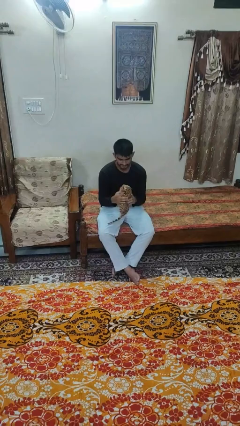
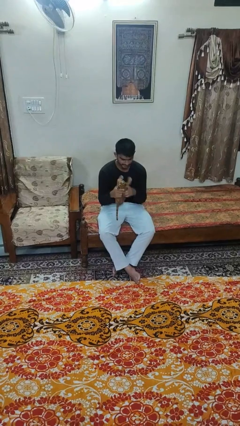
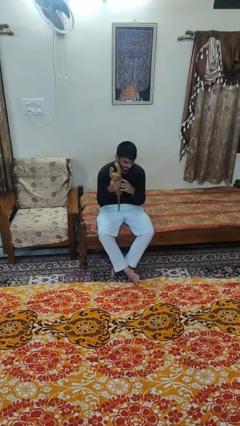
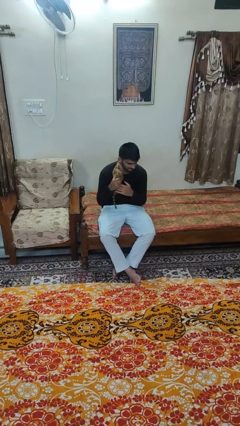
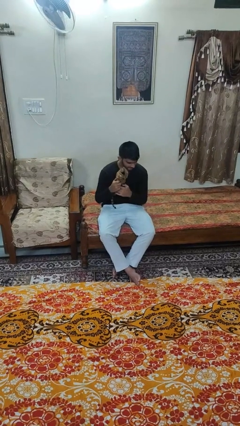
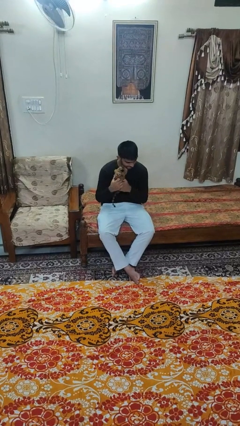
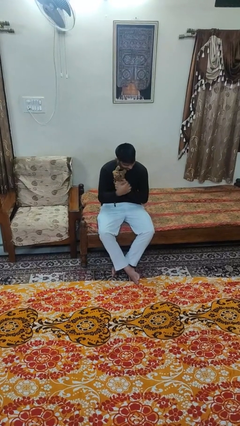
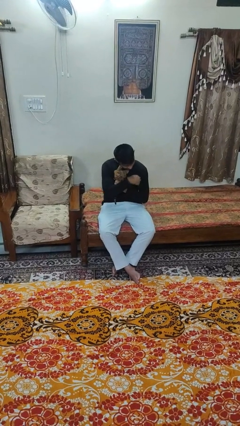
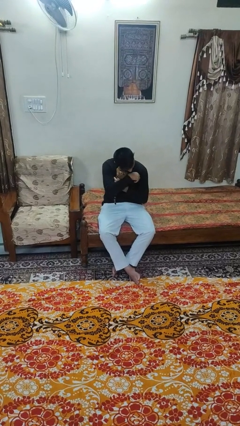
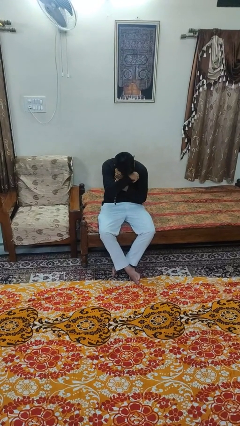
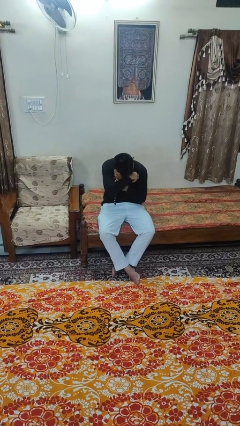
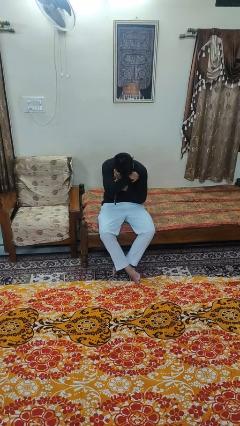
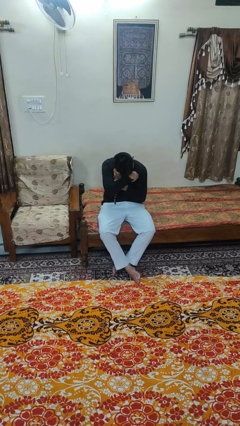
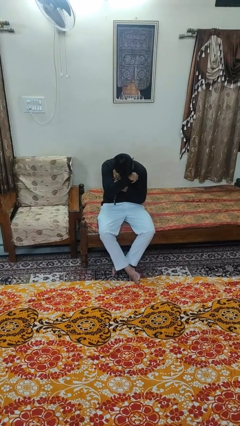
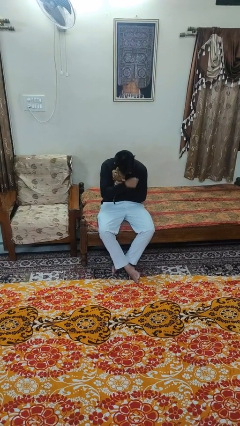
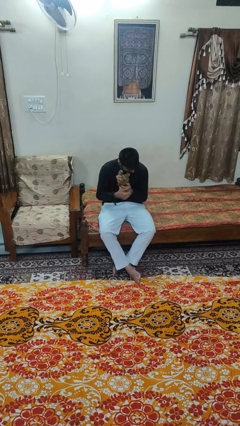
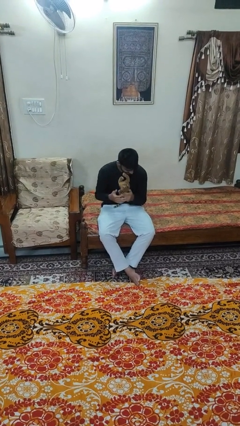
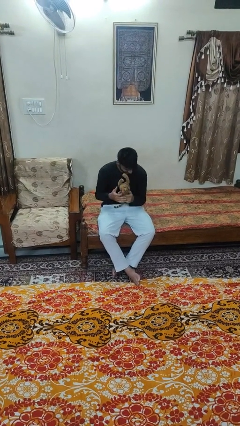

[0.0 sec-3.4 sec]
person hugs stuffed animal

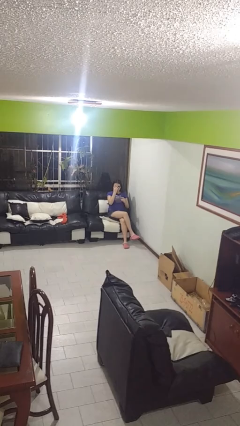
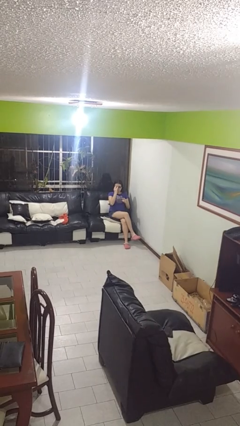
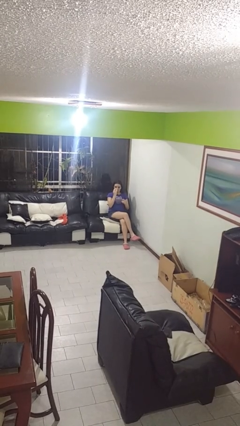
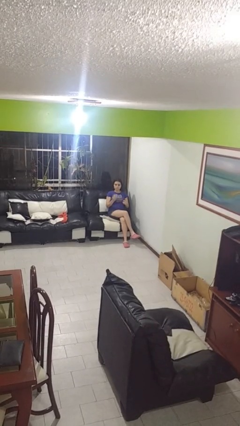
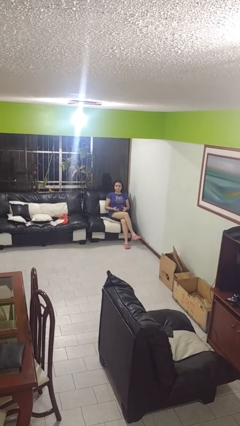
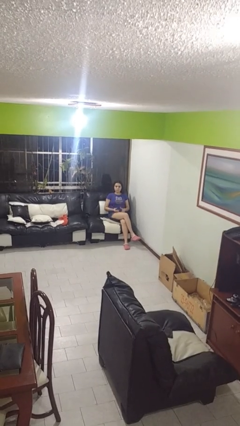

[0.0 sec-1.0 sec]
person takes off glasses

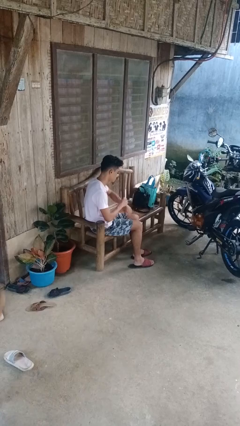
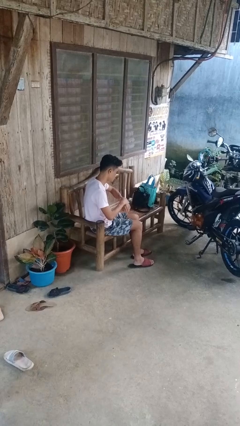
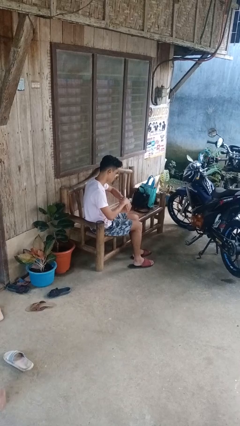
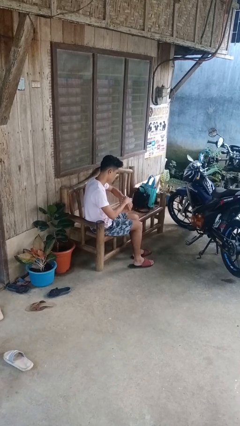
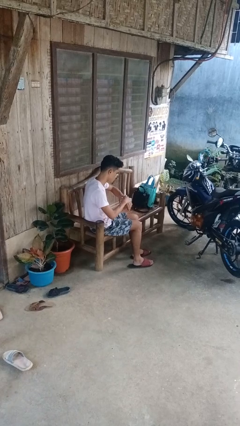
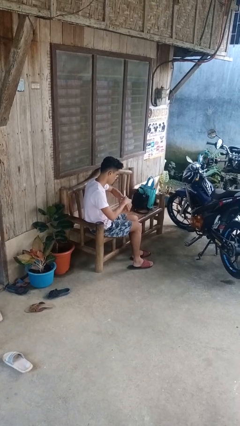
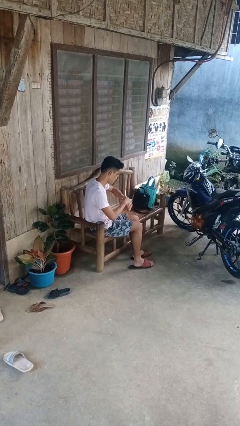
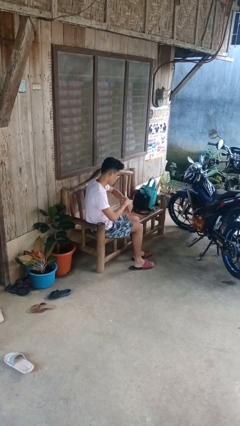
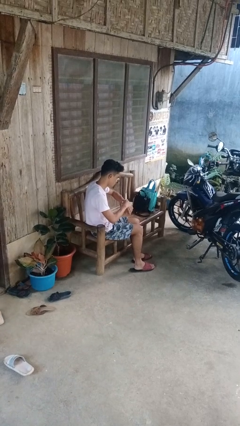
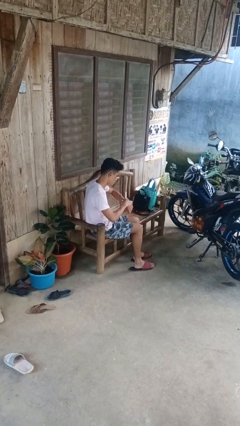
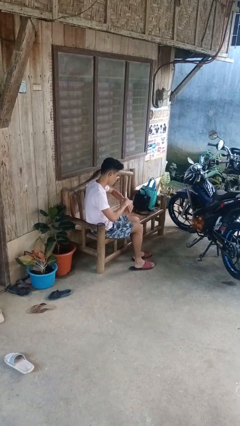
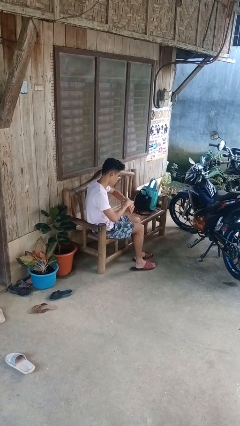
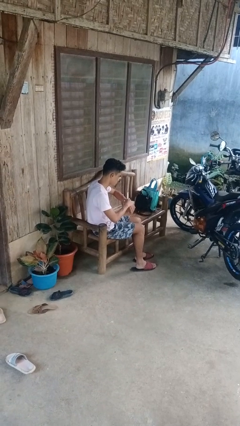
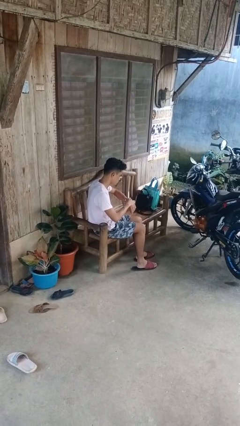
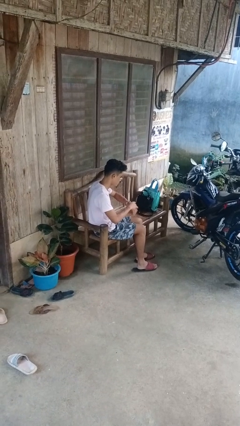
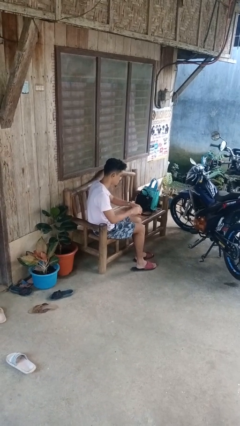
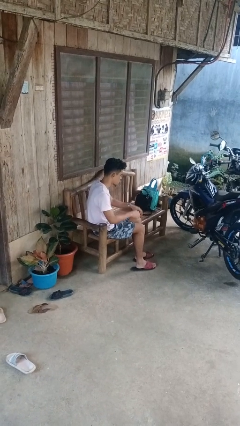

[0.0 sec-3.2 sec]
person looks at wristwatch

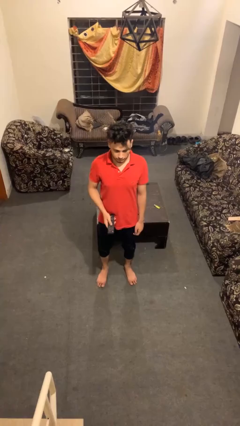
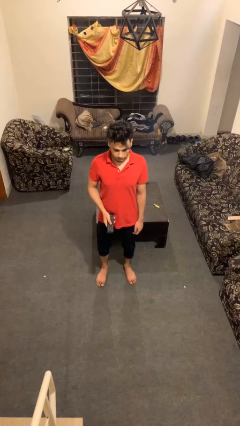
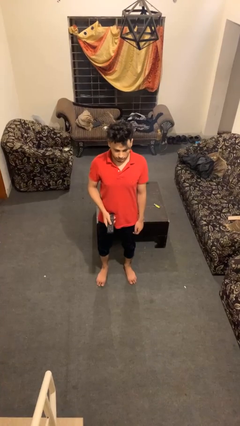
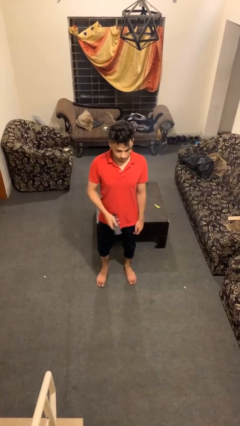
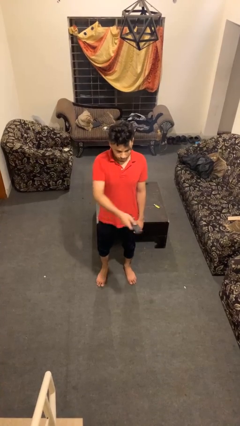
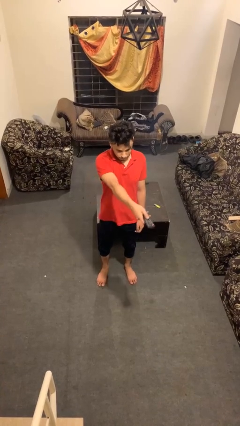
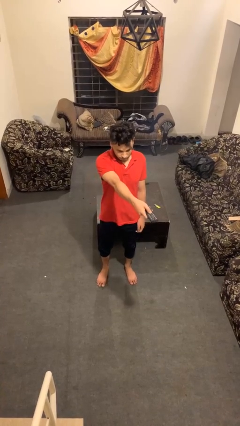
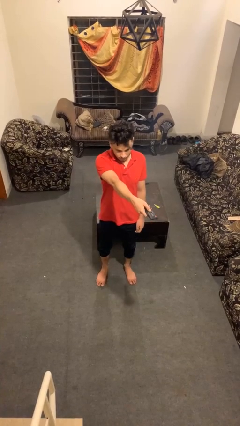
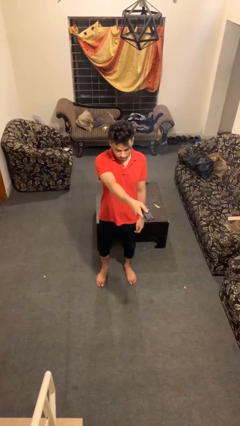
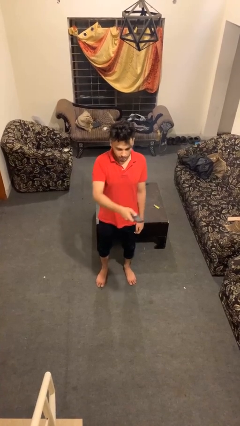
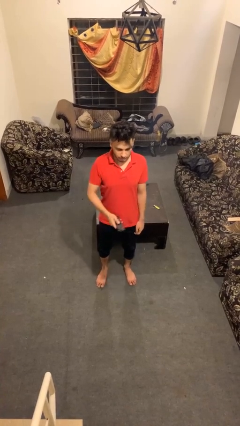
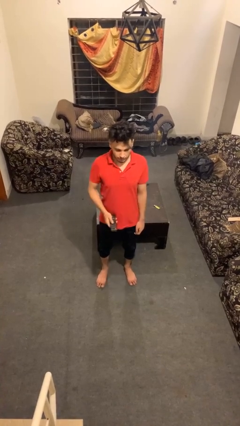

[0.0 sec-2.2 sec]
person uses television remote

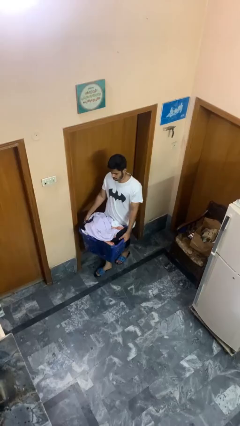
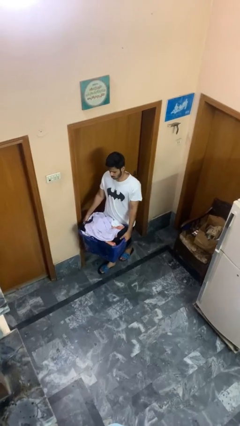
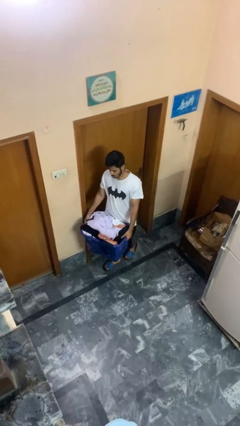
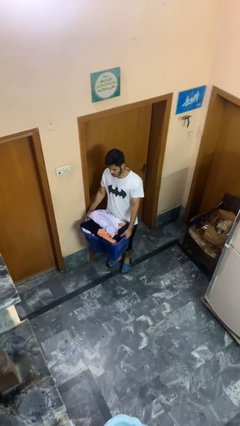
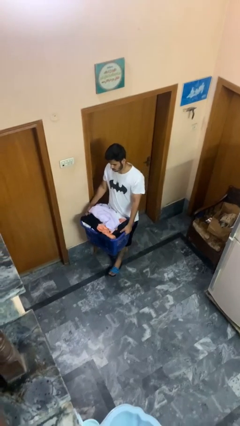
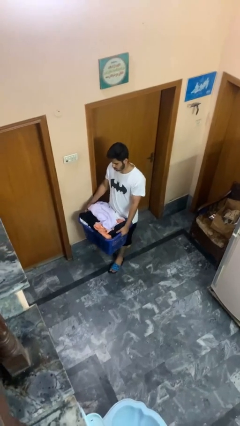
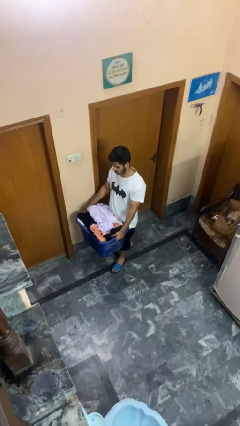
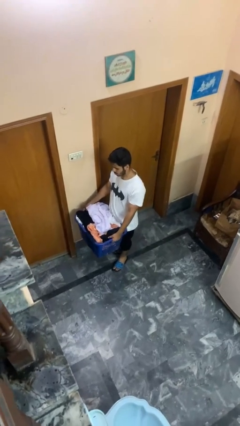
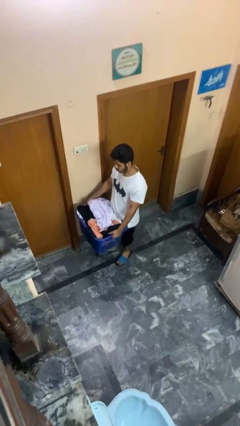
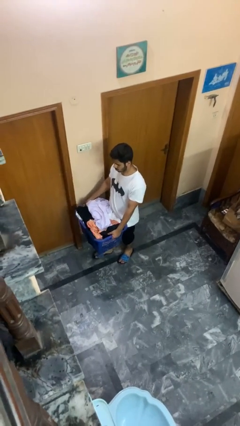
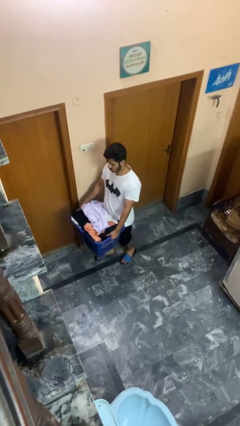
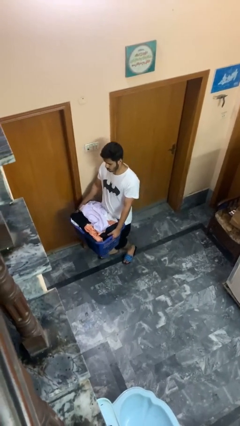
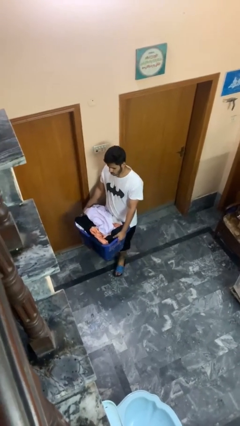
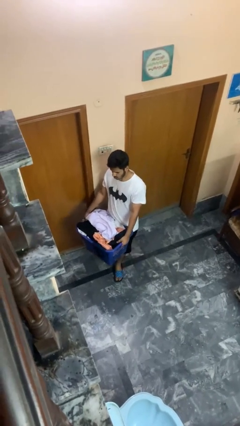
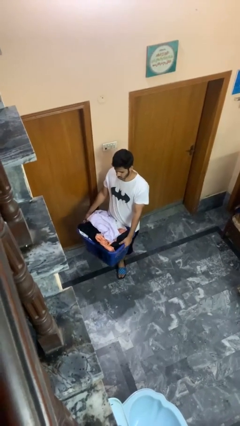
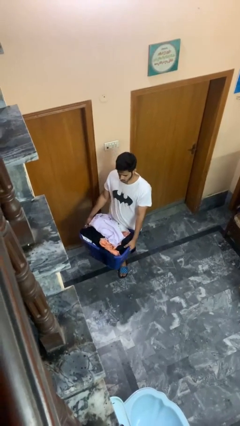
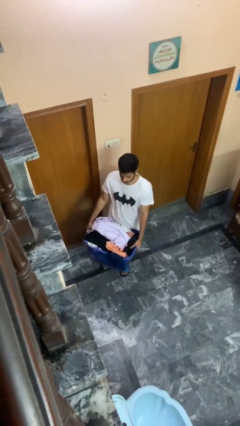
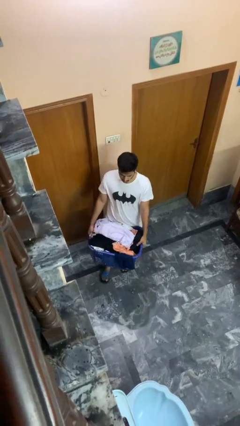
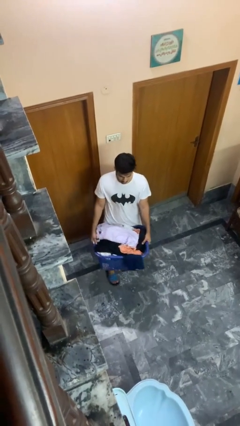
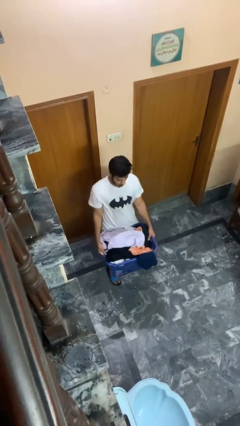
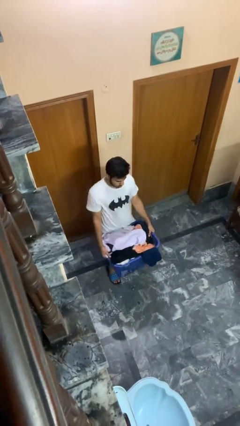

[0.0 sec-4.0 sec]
person carries laundry basket

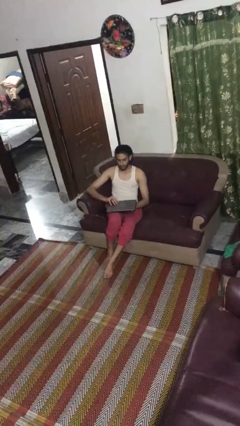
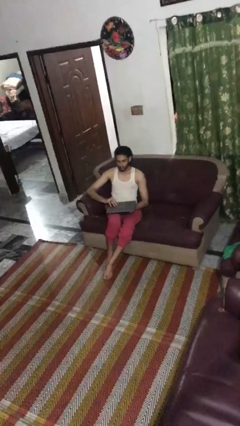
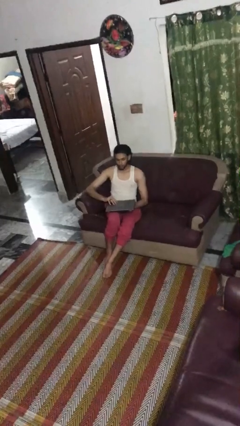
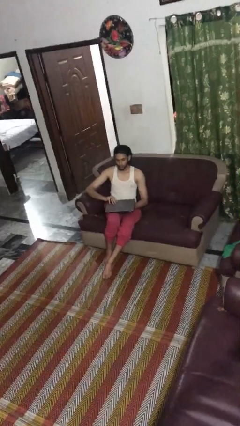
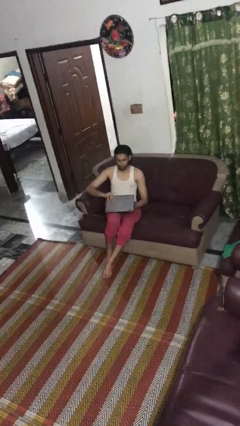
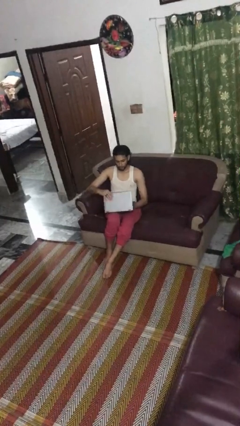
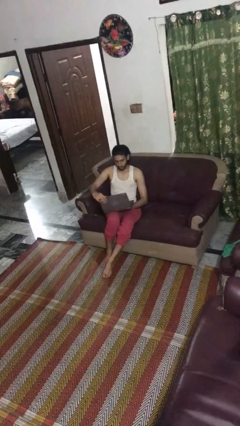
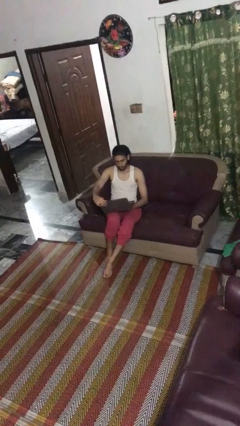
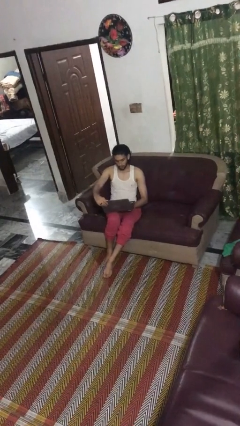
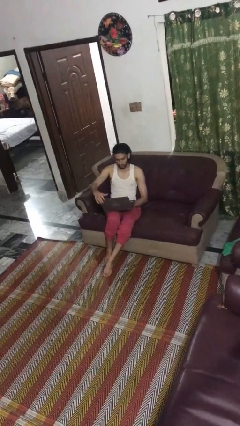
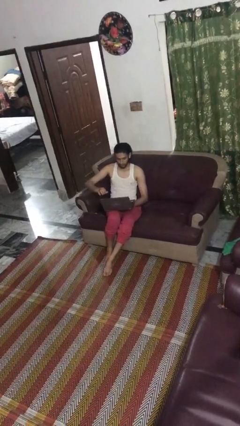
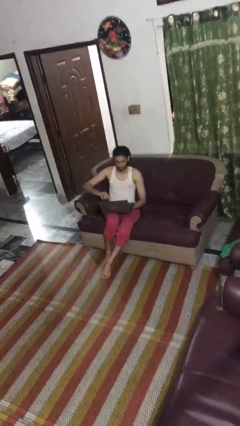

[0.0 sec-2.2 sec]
person opens laptop

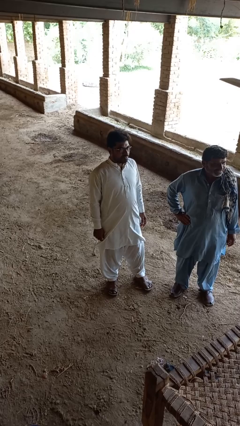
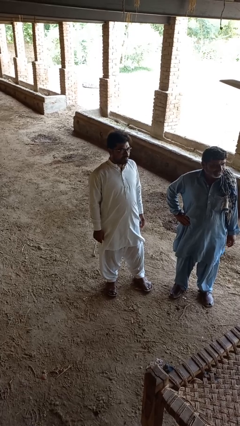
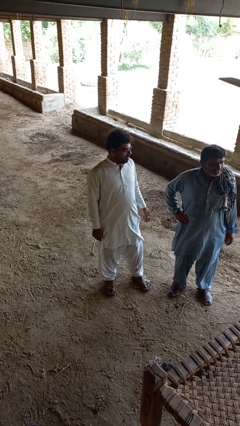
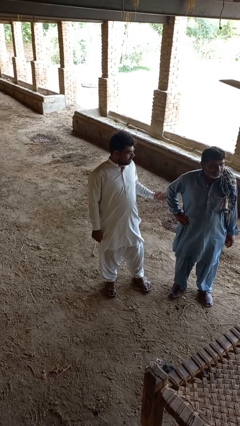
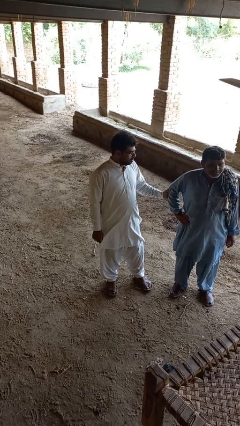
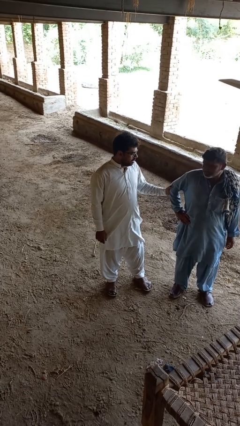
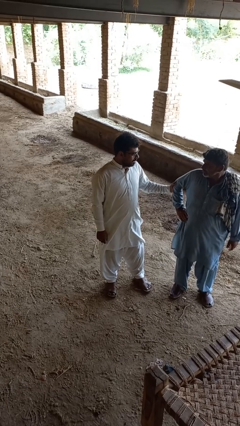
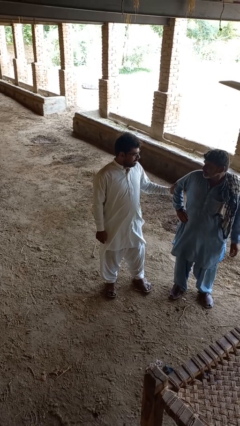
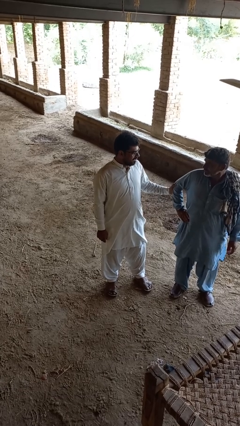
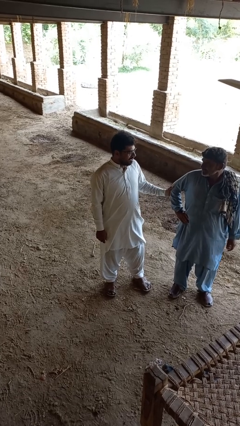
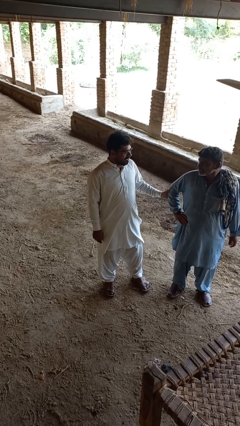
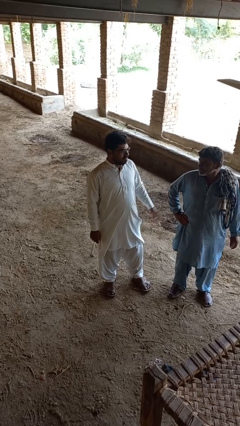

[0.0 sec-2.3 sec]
person grabs person by forearm
